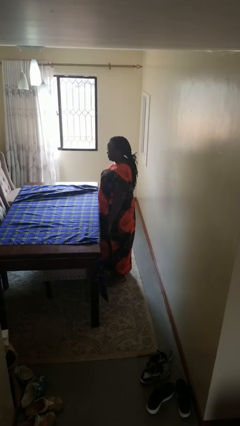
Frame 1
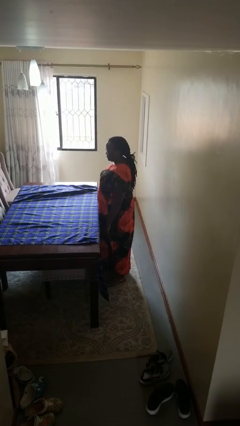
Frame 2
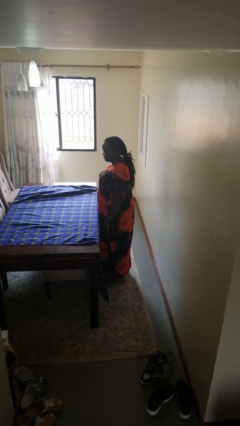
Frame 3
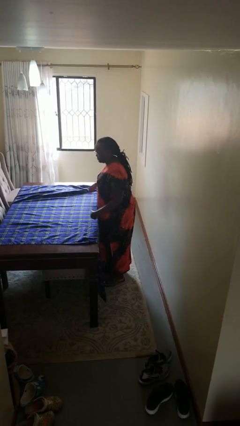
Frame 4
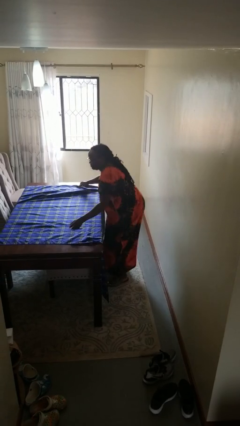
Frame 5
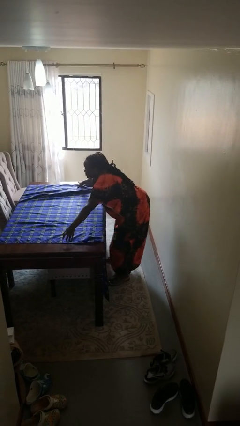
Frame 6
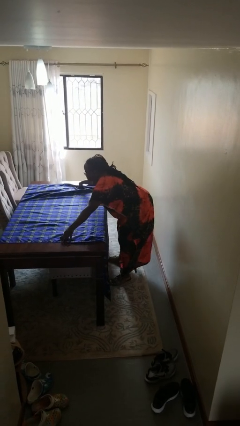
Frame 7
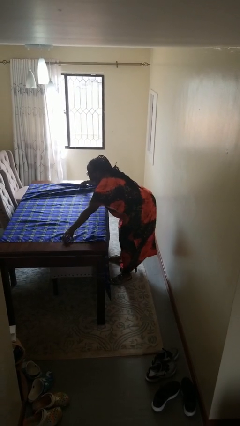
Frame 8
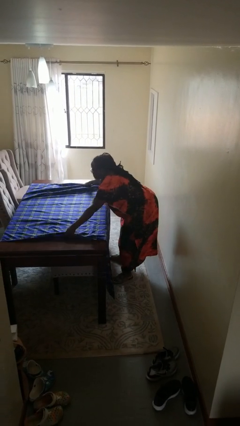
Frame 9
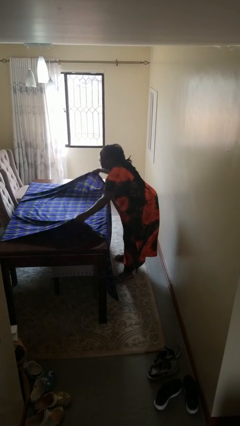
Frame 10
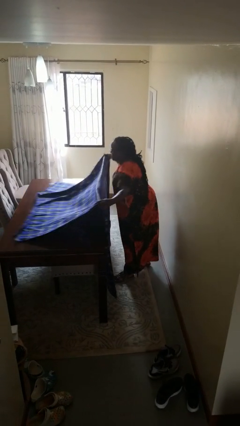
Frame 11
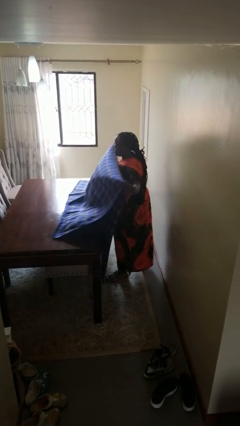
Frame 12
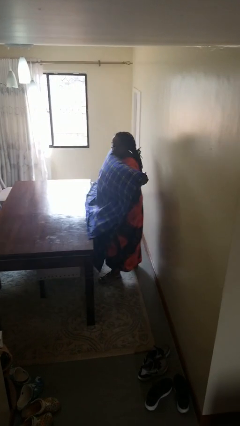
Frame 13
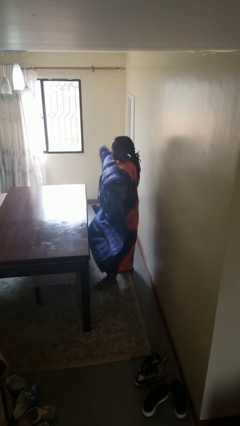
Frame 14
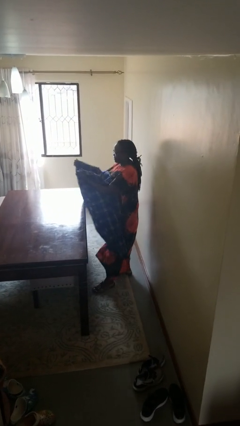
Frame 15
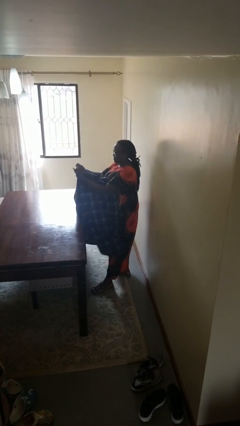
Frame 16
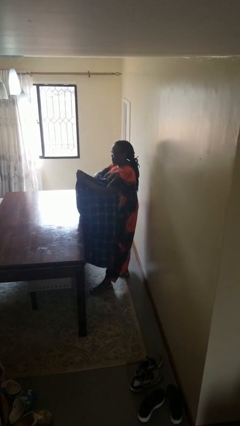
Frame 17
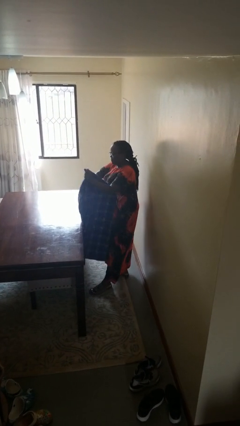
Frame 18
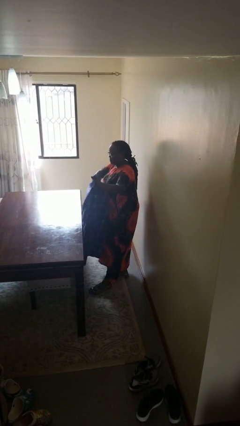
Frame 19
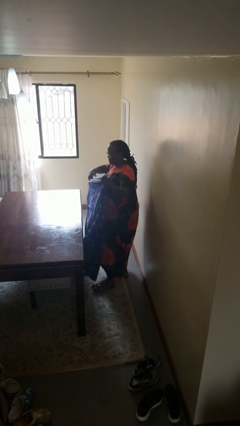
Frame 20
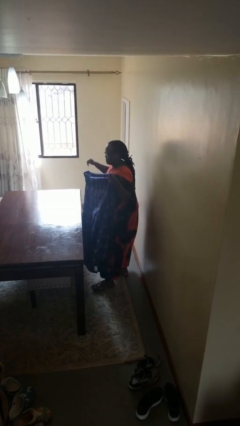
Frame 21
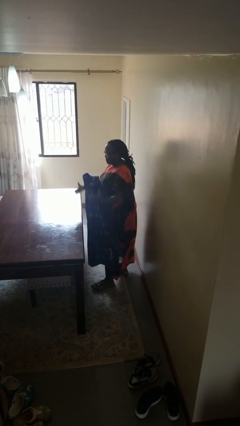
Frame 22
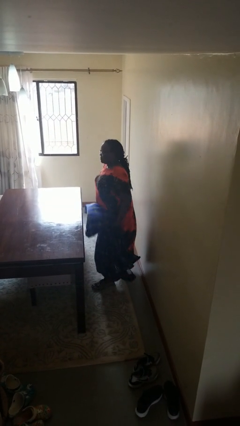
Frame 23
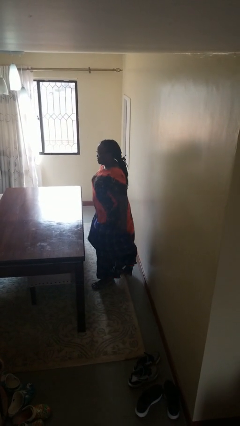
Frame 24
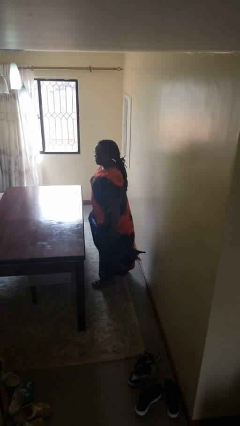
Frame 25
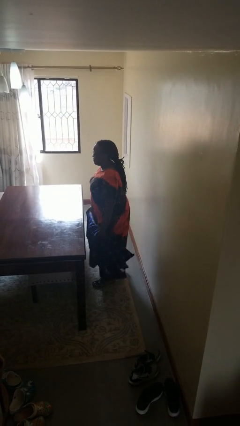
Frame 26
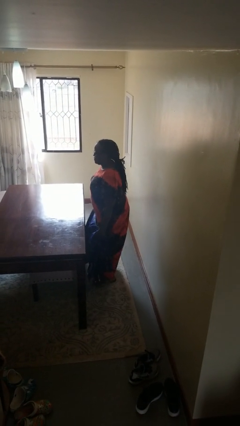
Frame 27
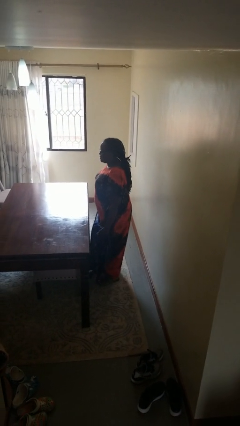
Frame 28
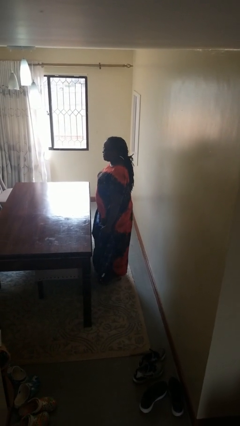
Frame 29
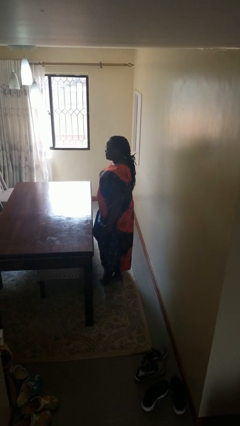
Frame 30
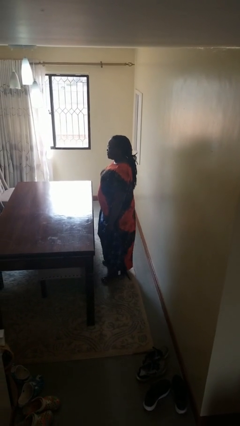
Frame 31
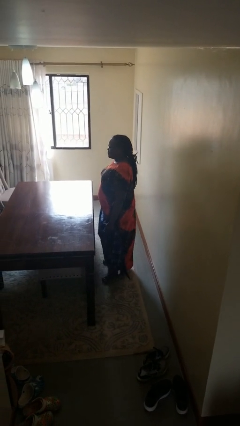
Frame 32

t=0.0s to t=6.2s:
person folds tablecloth

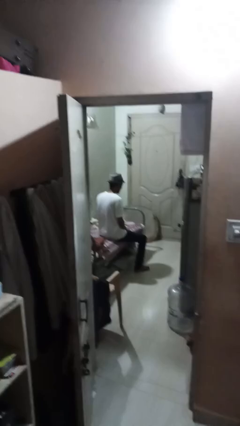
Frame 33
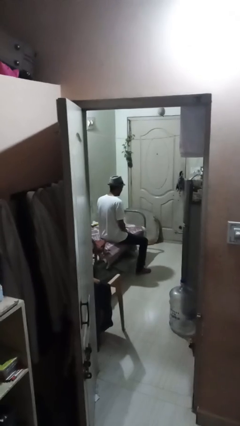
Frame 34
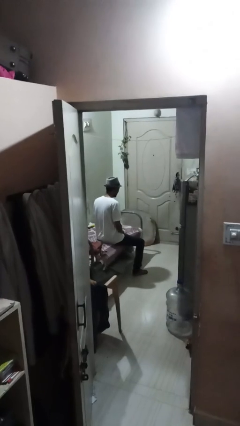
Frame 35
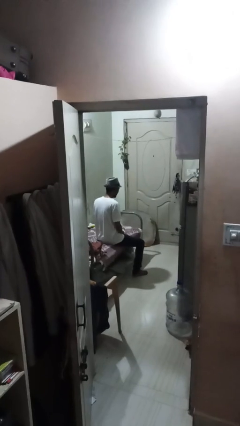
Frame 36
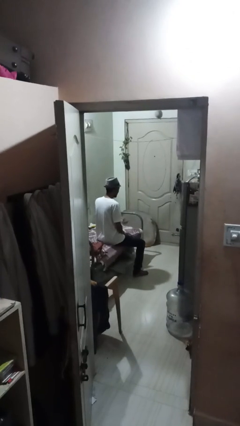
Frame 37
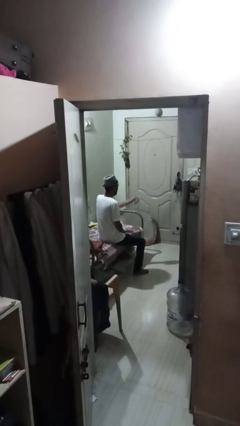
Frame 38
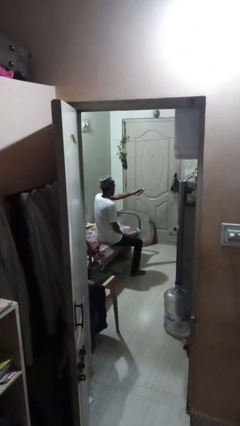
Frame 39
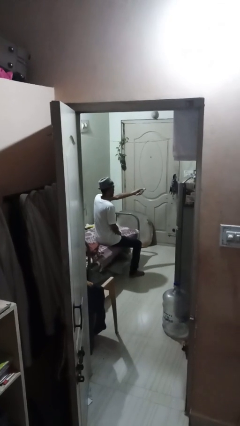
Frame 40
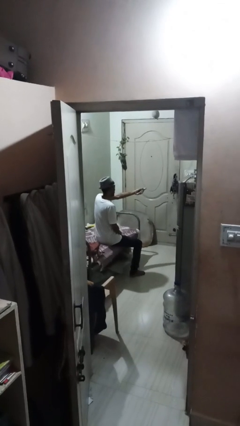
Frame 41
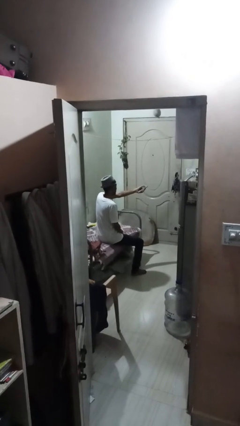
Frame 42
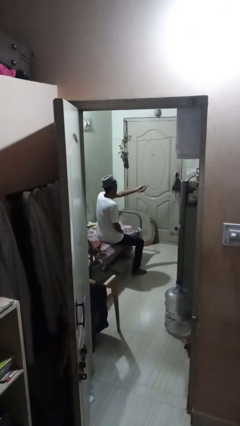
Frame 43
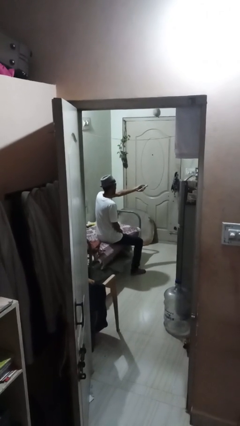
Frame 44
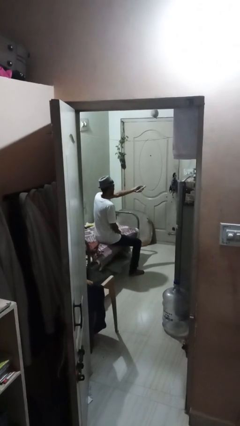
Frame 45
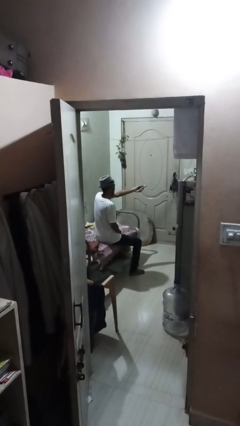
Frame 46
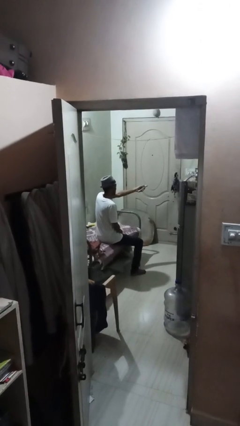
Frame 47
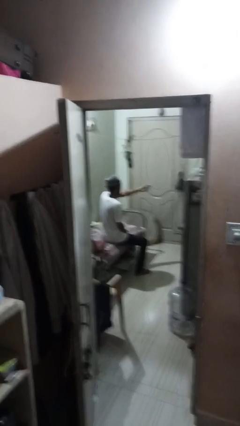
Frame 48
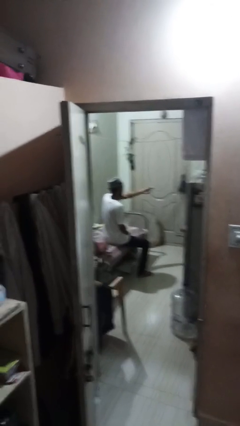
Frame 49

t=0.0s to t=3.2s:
person uses television remote

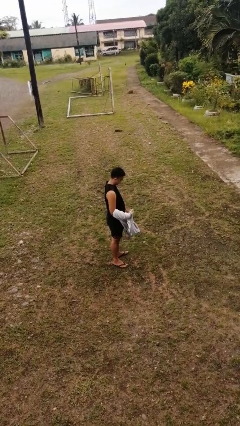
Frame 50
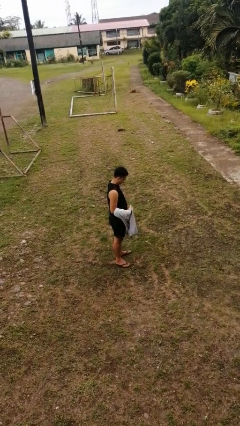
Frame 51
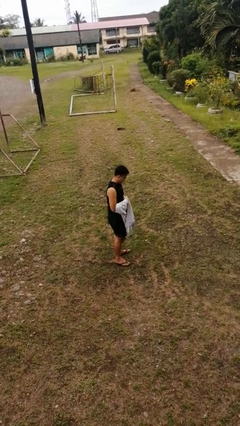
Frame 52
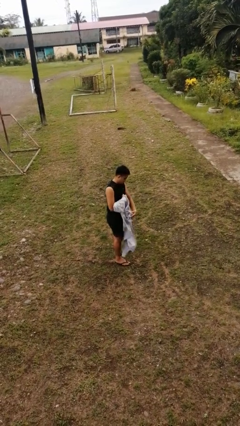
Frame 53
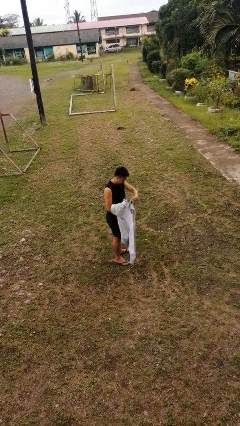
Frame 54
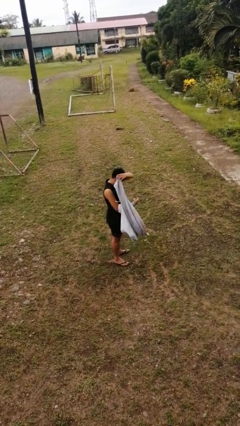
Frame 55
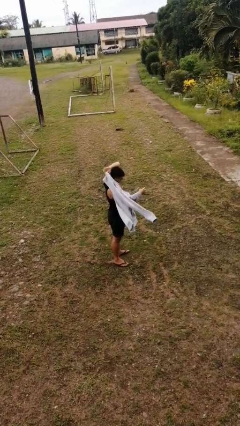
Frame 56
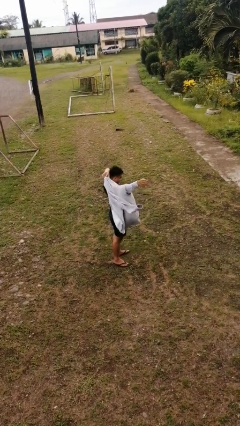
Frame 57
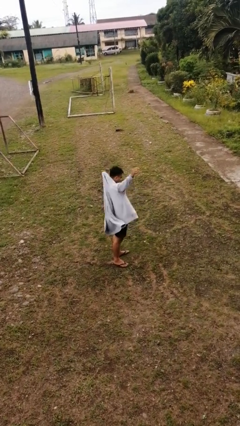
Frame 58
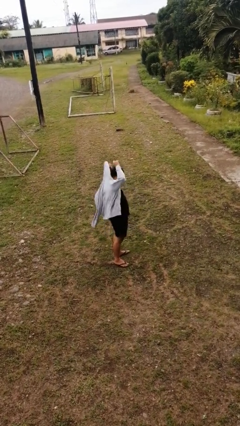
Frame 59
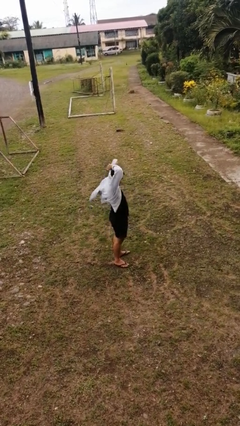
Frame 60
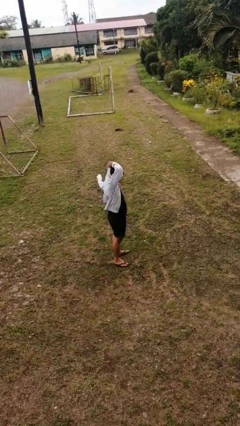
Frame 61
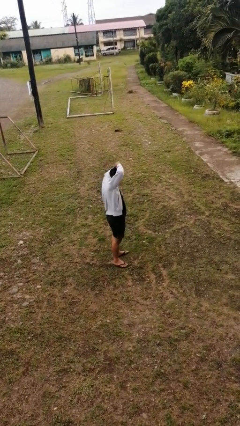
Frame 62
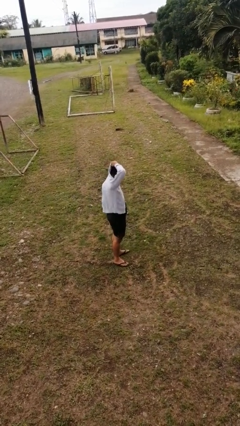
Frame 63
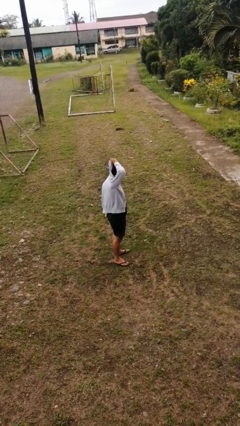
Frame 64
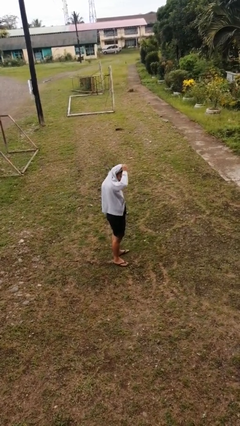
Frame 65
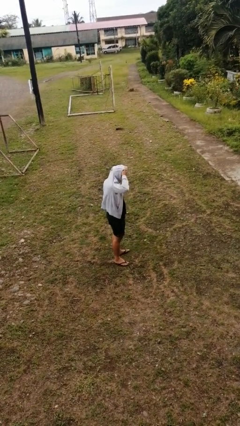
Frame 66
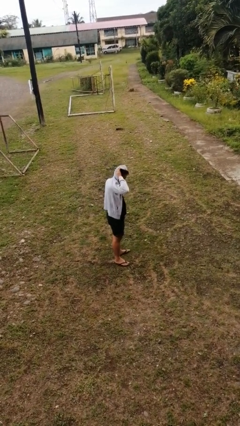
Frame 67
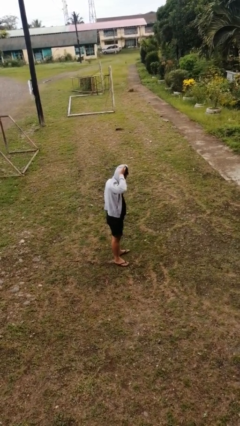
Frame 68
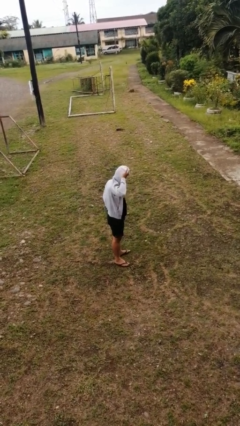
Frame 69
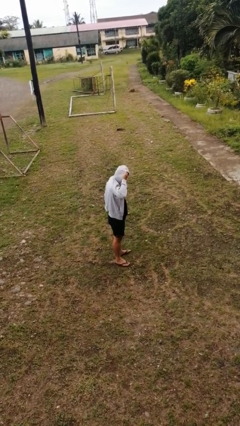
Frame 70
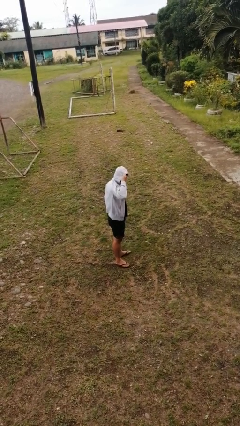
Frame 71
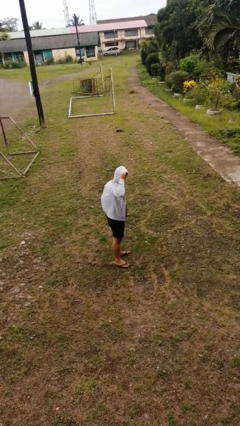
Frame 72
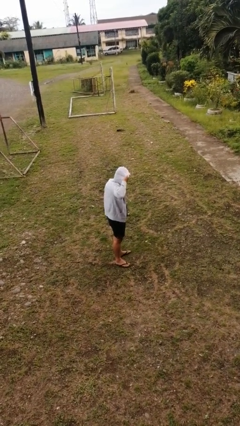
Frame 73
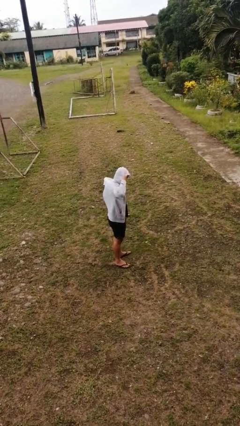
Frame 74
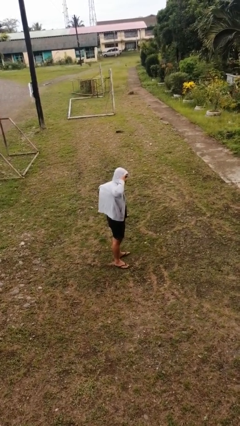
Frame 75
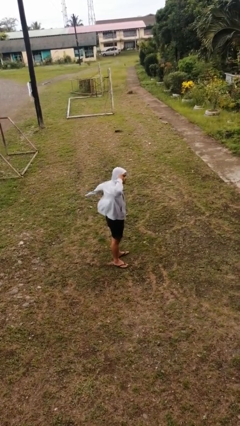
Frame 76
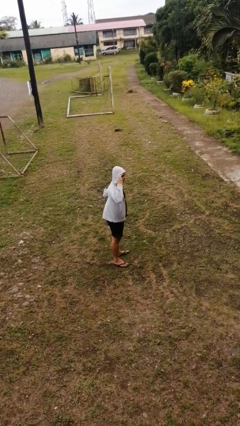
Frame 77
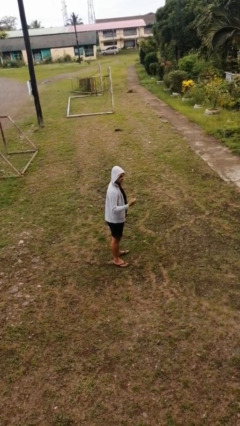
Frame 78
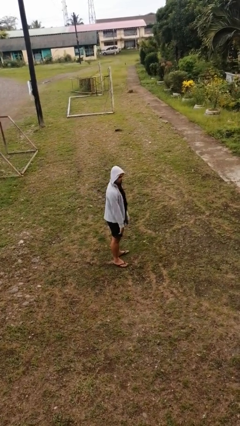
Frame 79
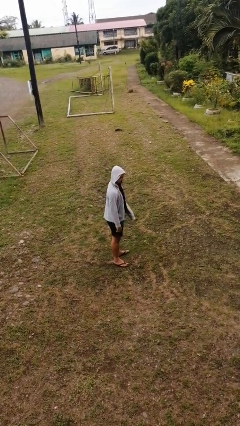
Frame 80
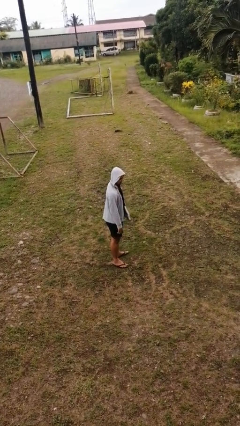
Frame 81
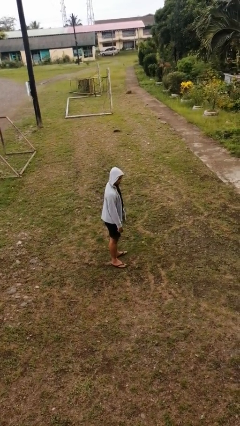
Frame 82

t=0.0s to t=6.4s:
person puts on hoodie

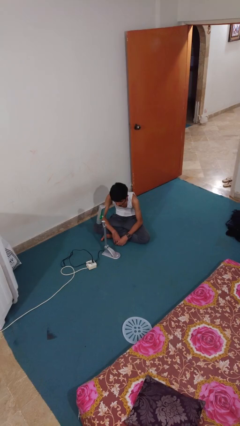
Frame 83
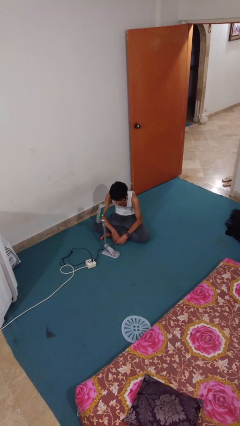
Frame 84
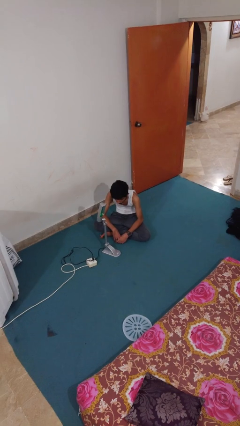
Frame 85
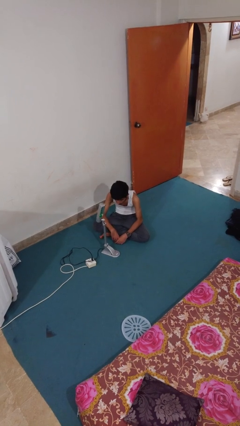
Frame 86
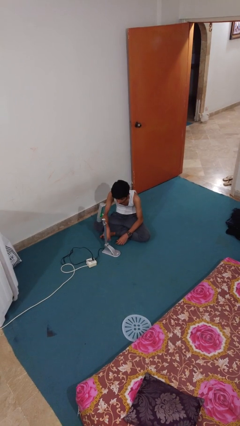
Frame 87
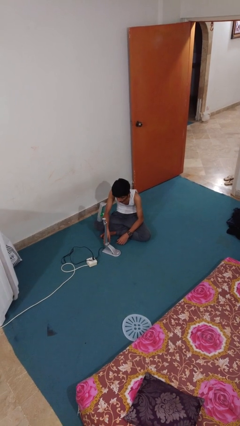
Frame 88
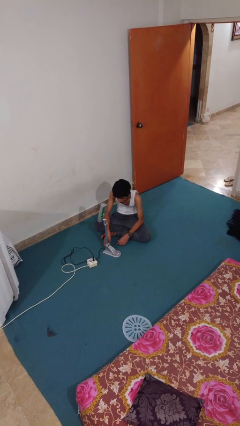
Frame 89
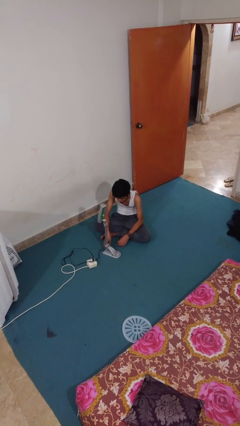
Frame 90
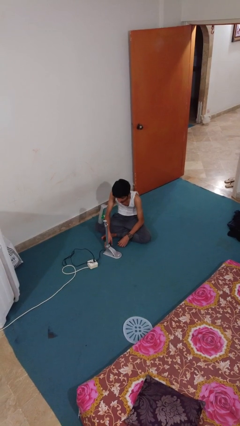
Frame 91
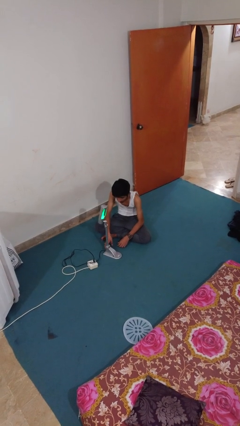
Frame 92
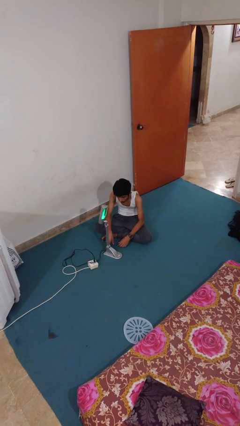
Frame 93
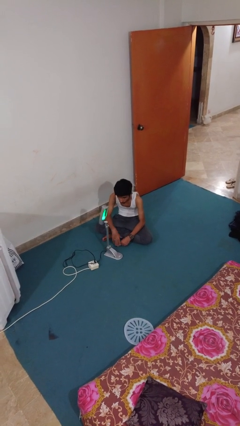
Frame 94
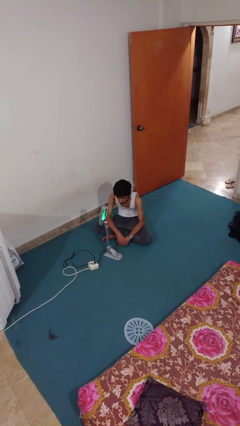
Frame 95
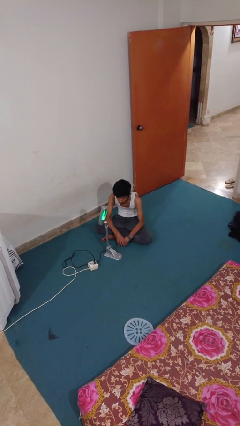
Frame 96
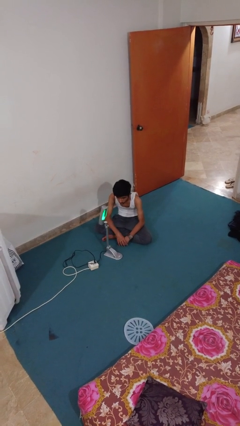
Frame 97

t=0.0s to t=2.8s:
person turns on lamp
